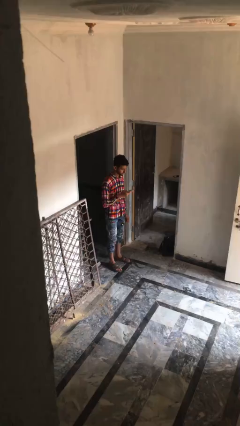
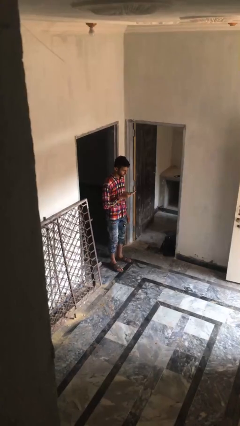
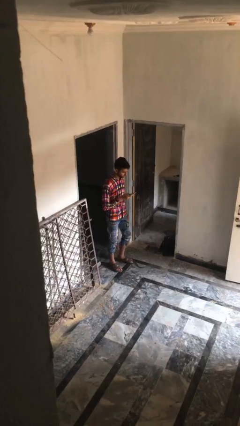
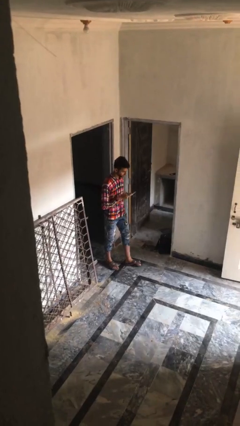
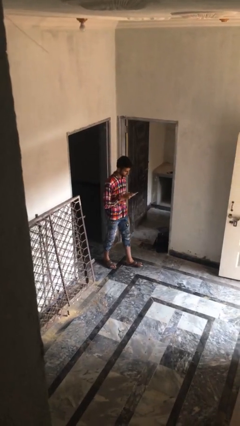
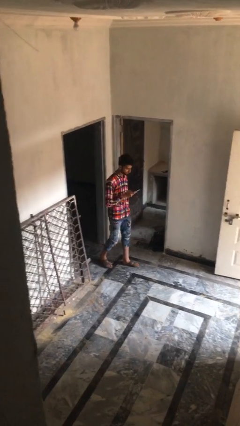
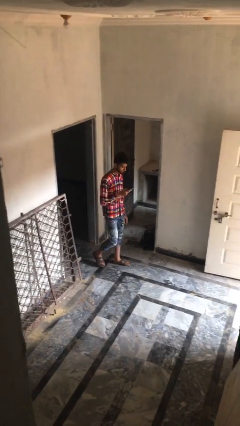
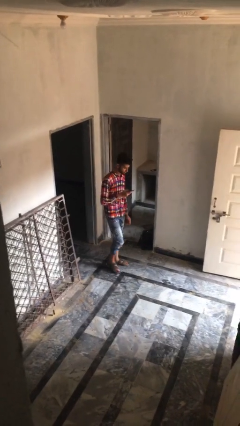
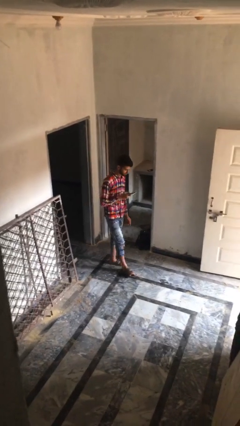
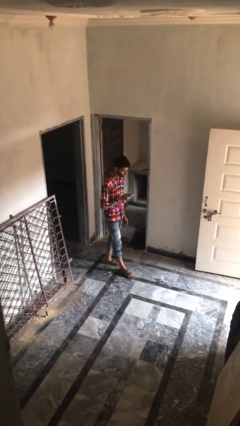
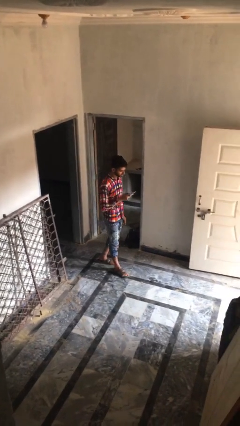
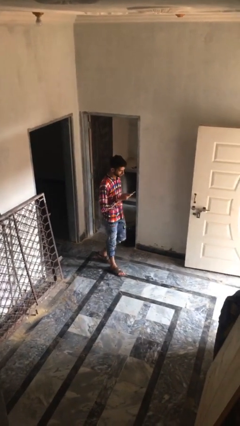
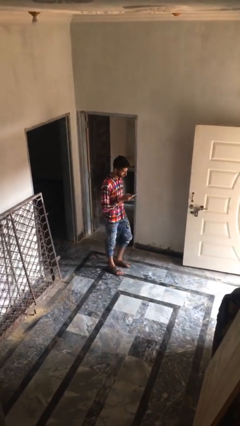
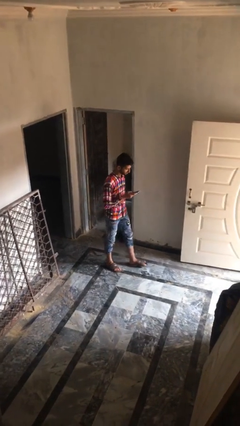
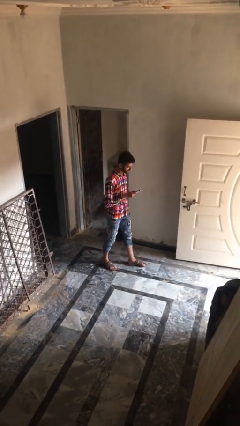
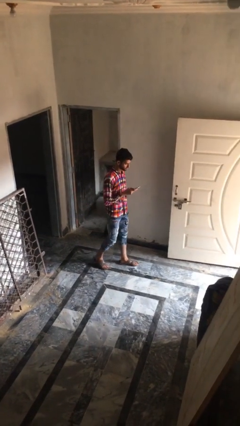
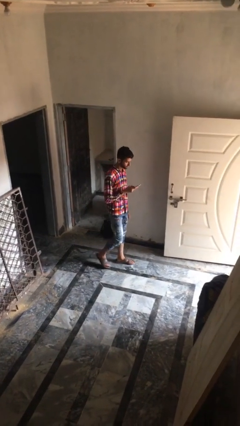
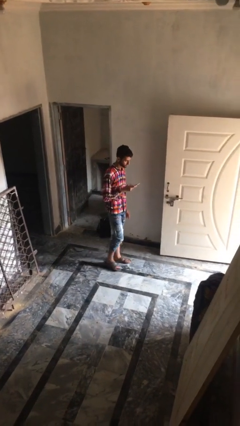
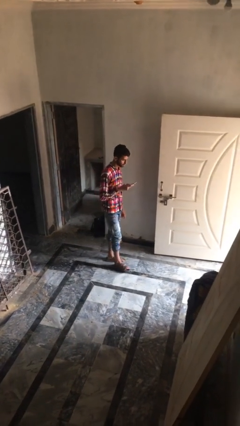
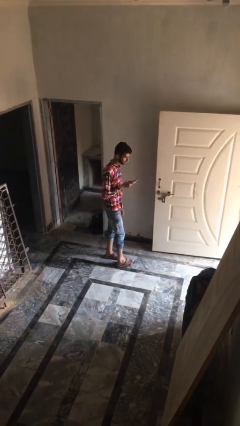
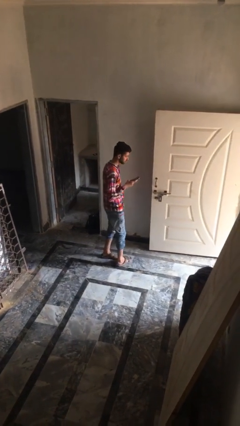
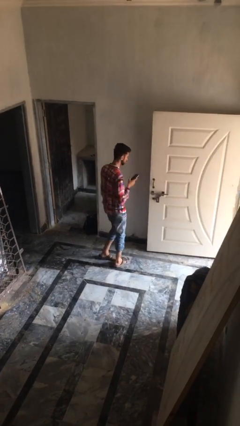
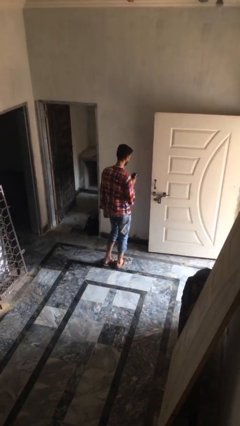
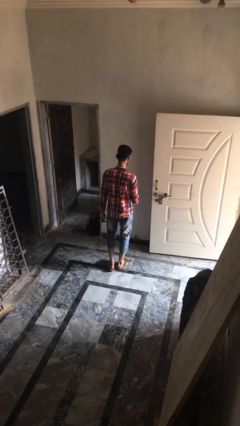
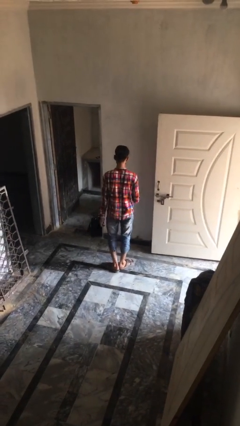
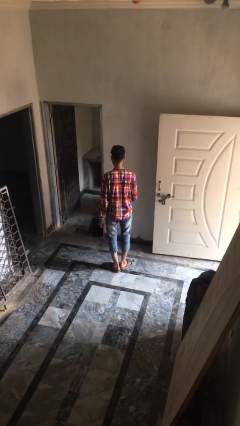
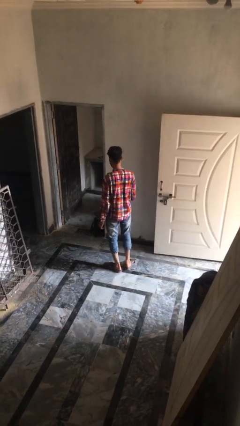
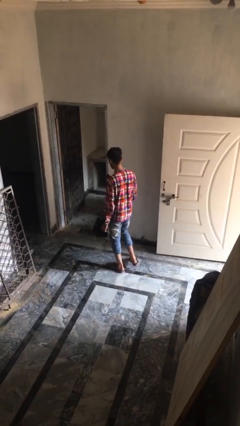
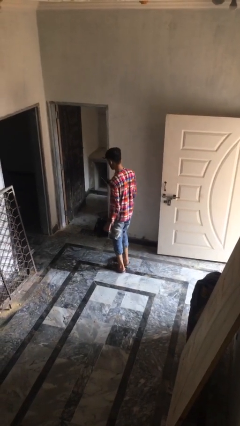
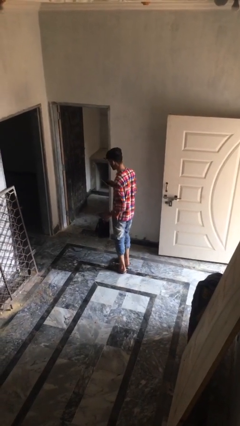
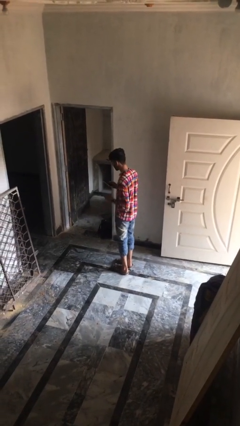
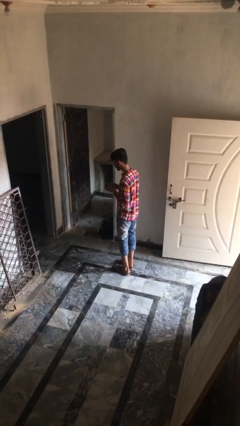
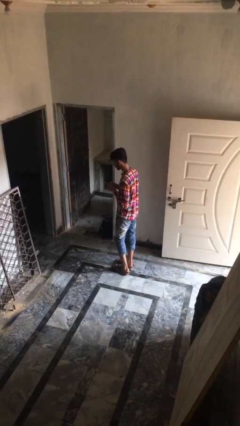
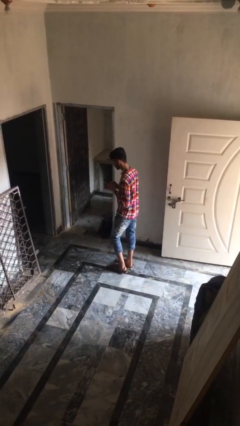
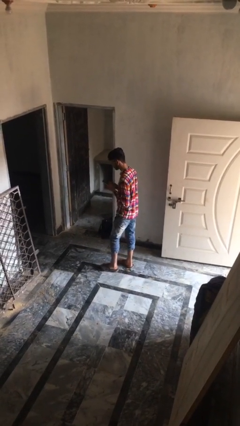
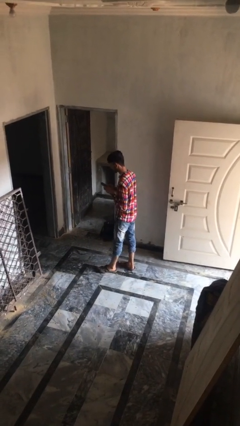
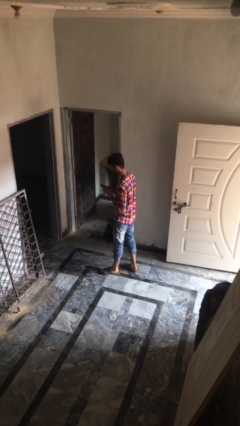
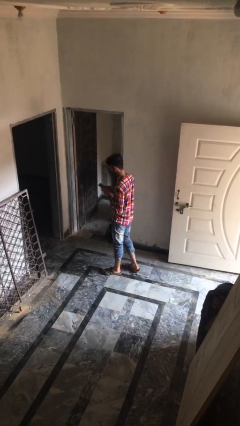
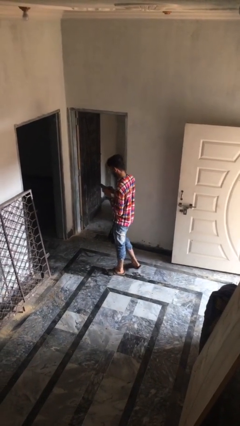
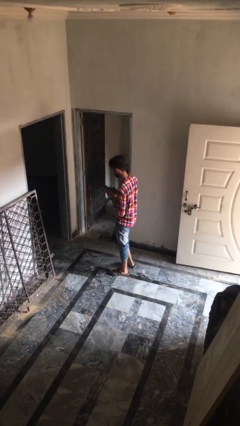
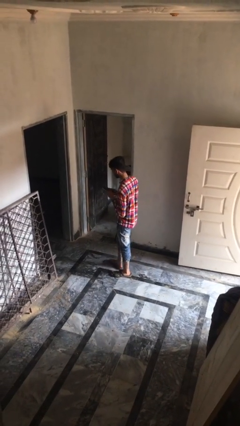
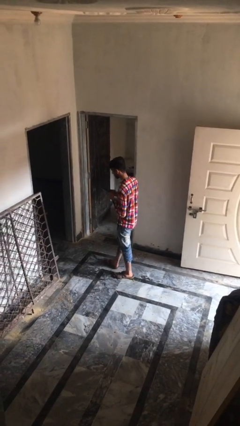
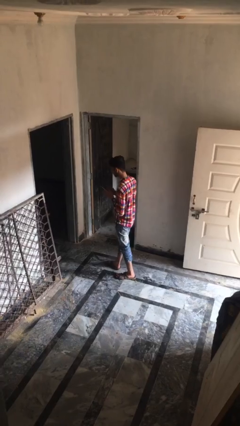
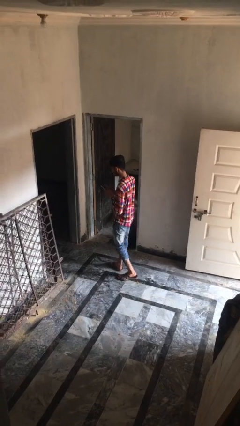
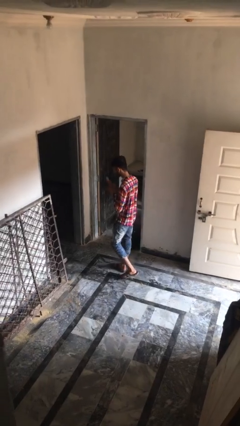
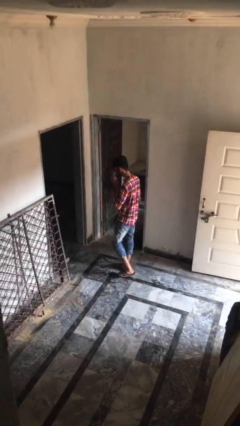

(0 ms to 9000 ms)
person texts on phone

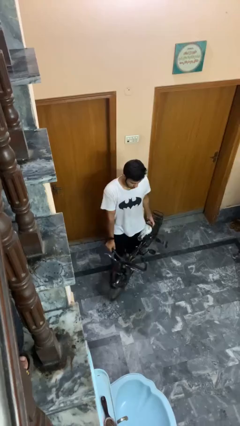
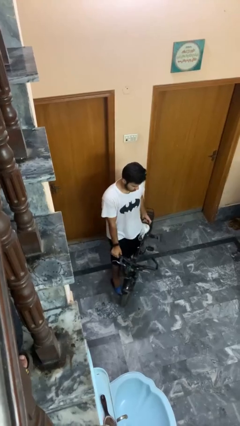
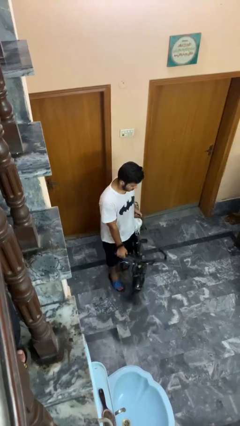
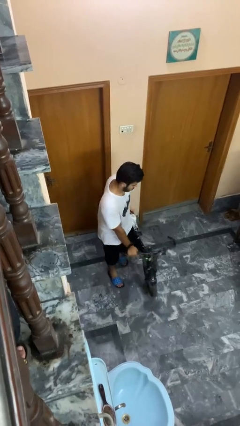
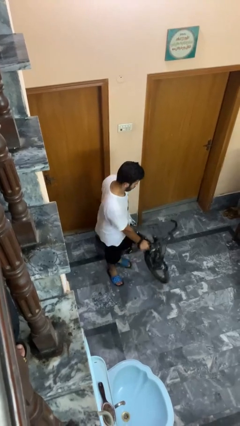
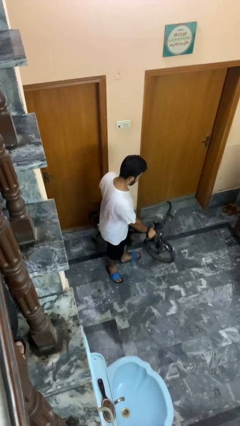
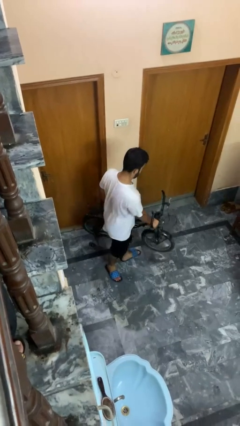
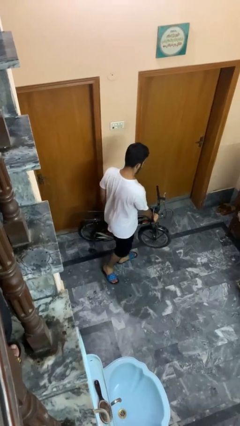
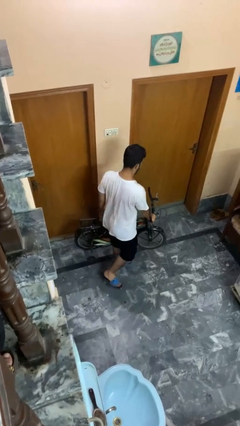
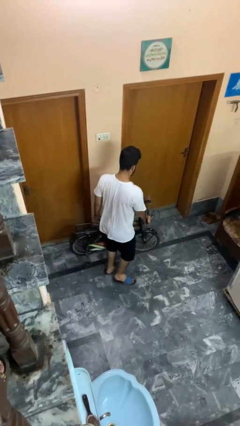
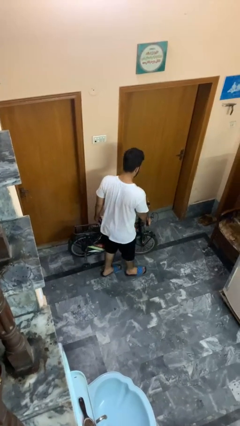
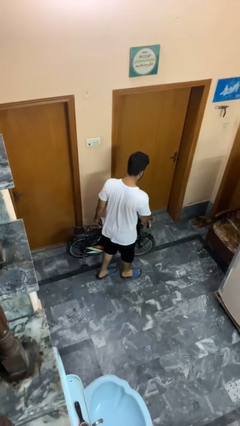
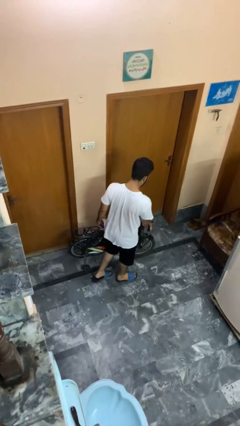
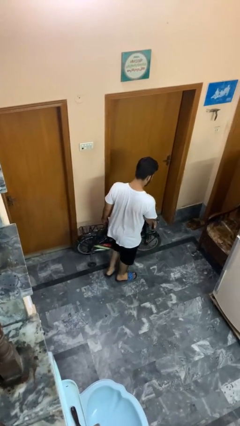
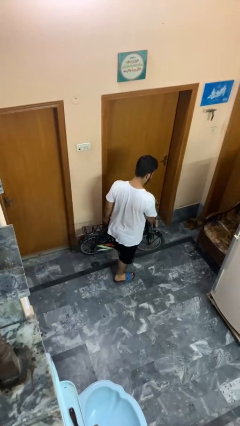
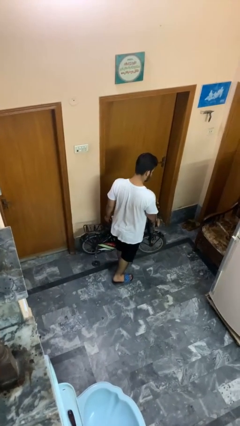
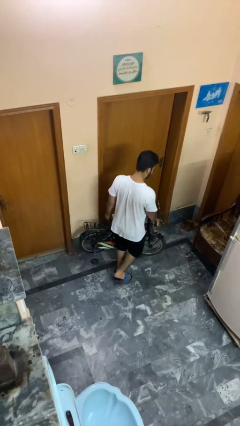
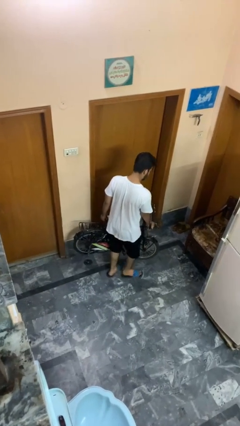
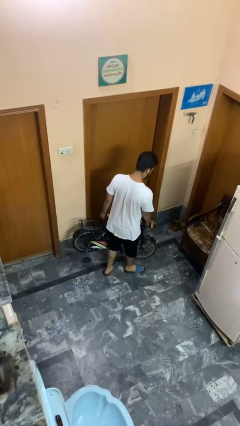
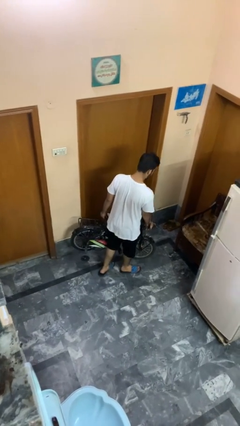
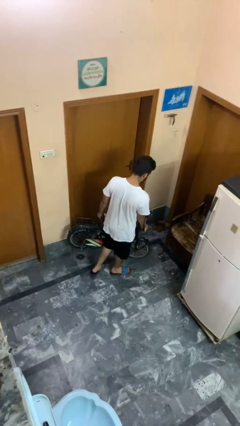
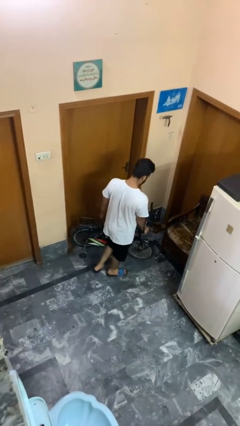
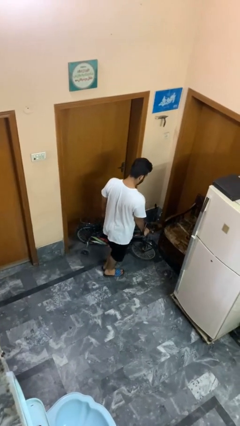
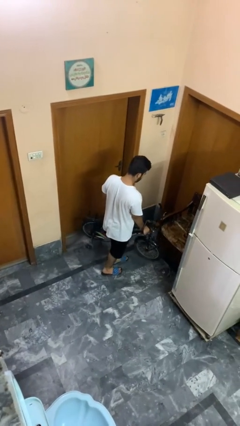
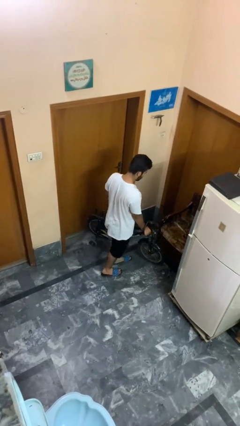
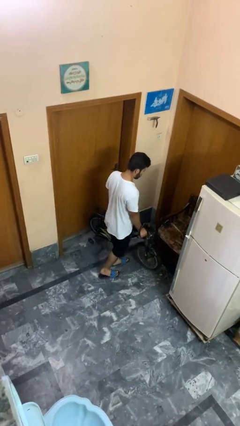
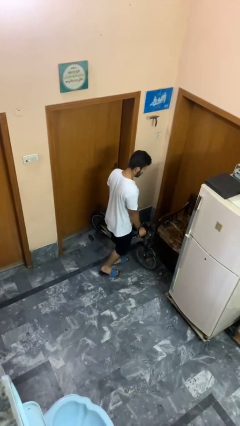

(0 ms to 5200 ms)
person carries bicycle

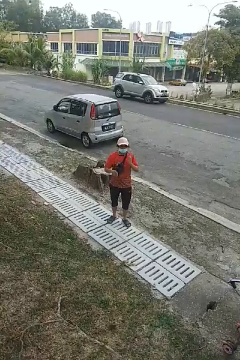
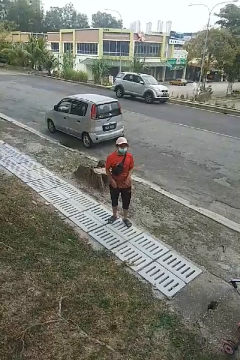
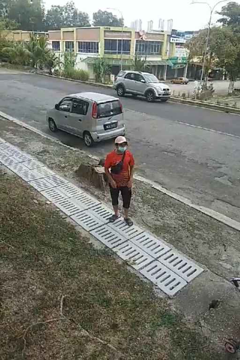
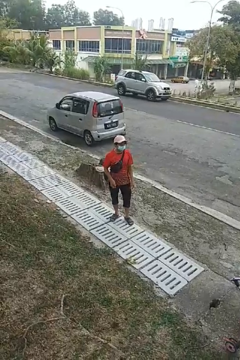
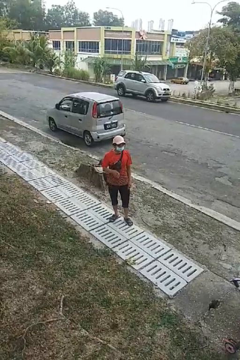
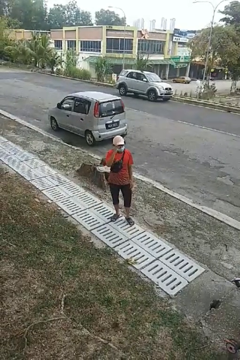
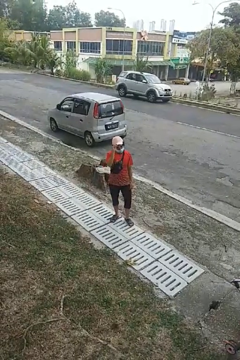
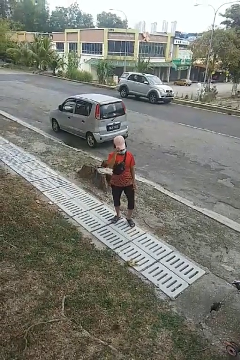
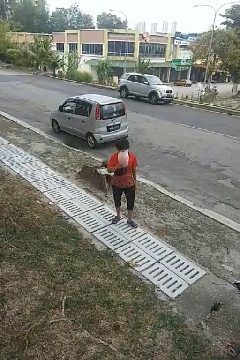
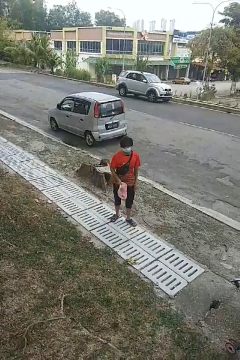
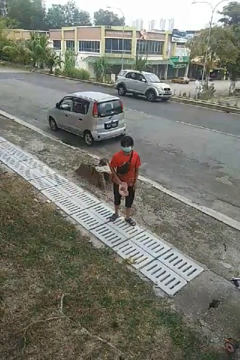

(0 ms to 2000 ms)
person takes off hat

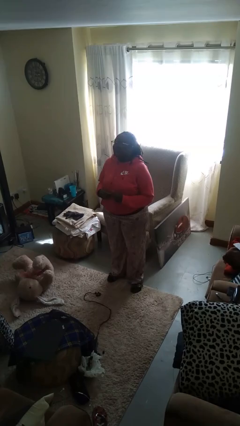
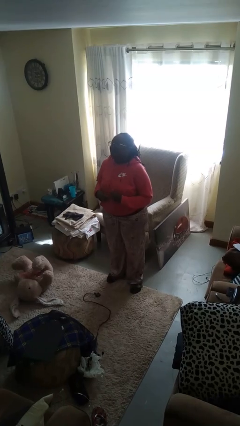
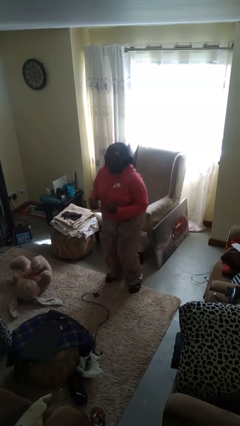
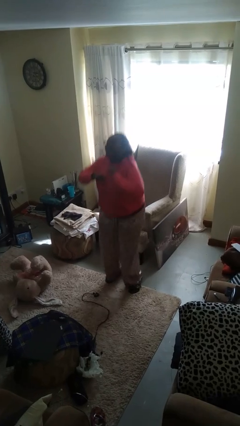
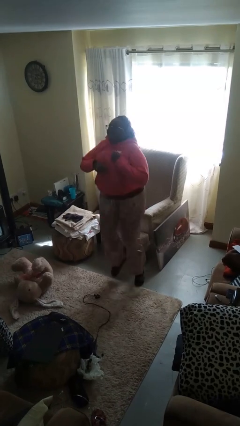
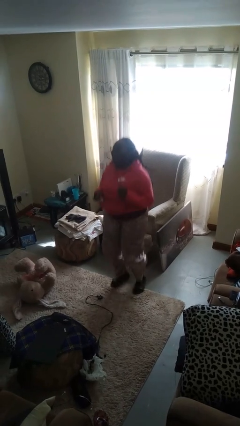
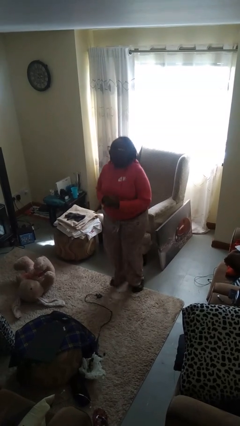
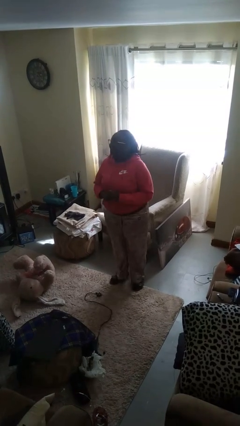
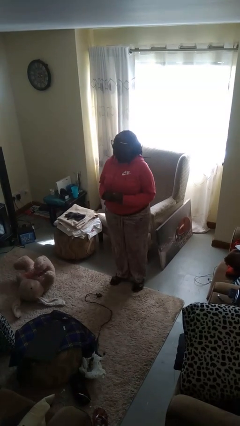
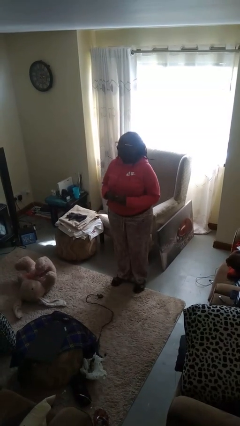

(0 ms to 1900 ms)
person jumps
